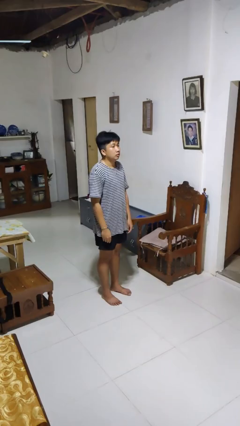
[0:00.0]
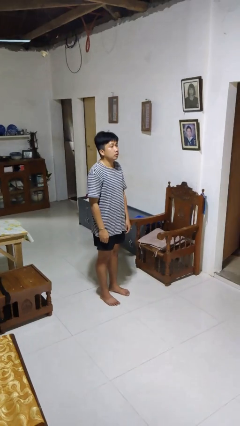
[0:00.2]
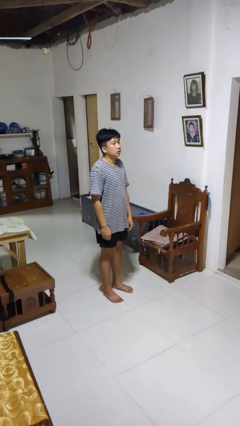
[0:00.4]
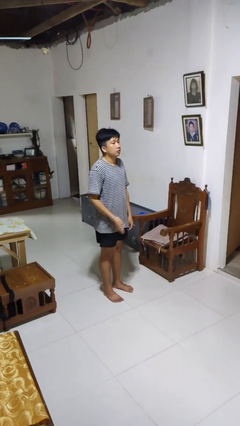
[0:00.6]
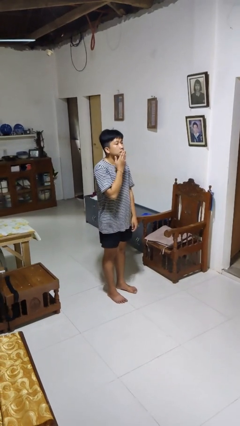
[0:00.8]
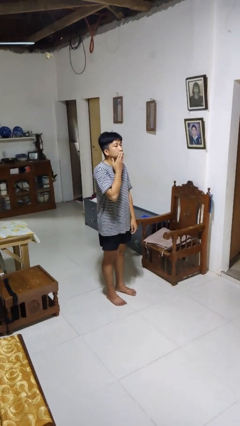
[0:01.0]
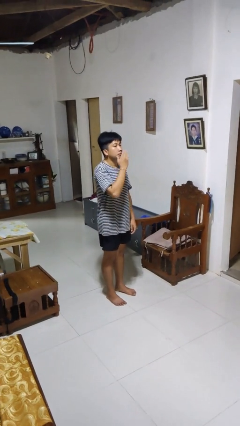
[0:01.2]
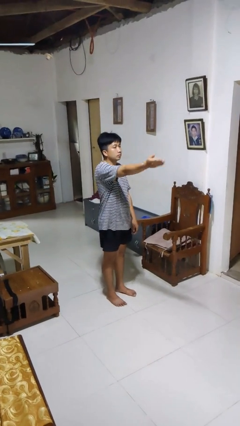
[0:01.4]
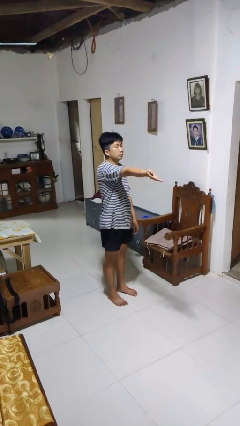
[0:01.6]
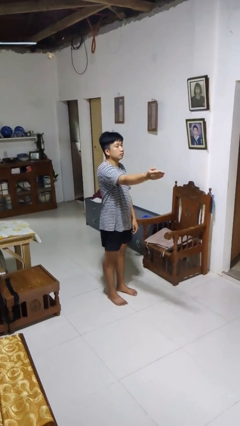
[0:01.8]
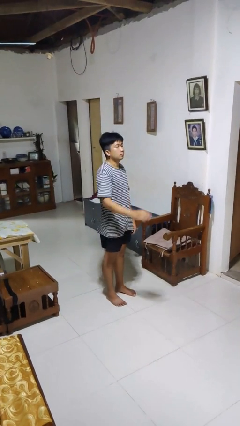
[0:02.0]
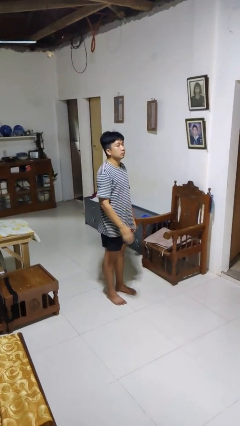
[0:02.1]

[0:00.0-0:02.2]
person gestures blow kiss

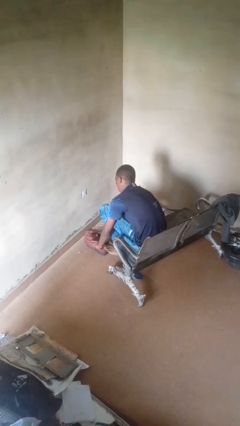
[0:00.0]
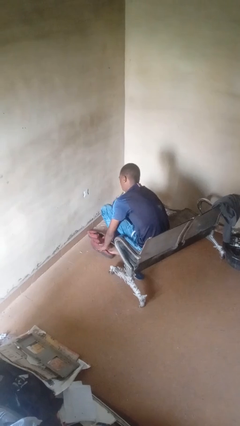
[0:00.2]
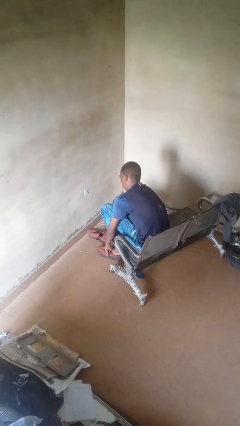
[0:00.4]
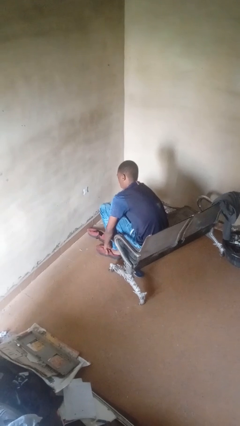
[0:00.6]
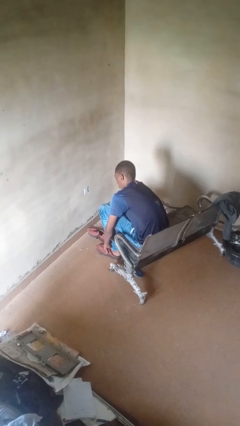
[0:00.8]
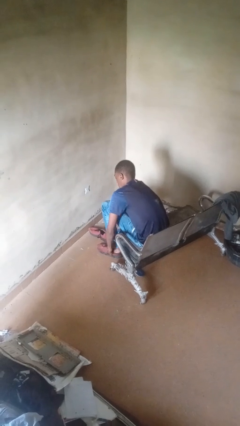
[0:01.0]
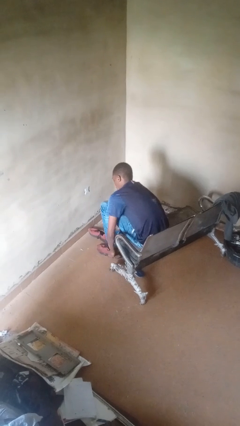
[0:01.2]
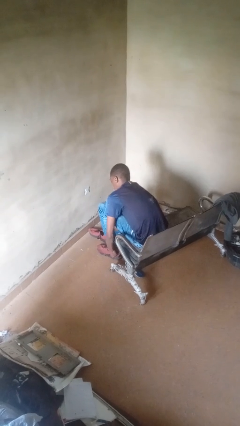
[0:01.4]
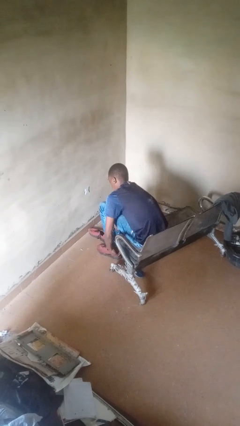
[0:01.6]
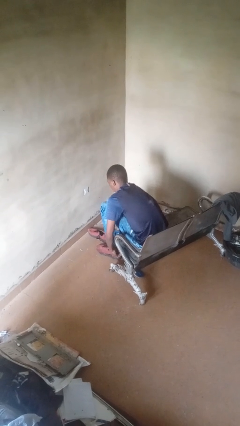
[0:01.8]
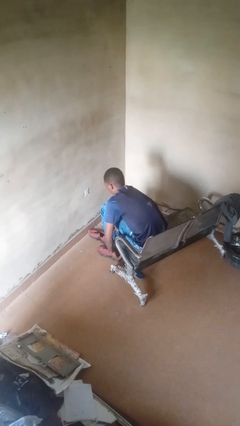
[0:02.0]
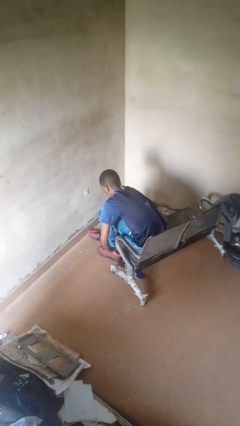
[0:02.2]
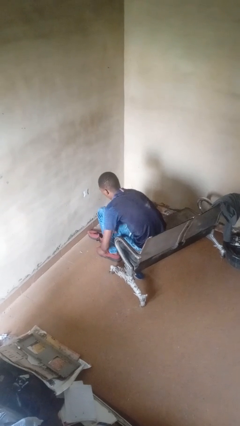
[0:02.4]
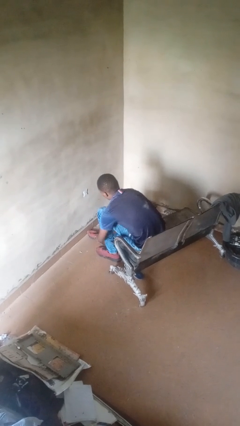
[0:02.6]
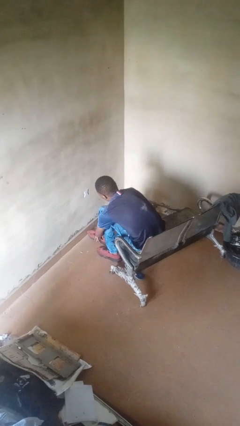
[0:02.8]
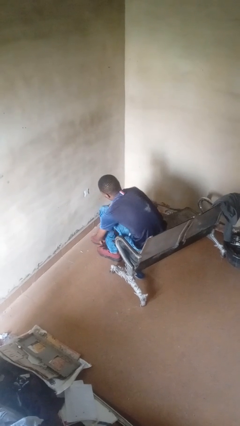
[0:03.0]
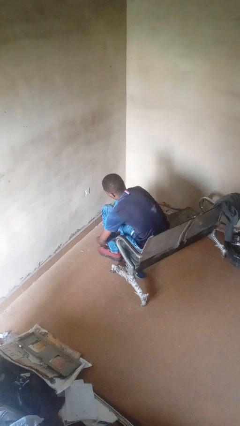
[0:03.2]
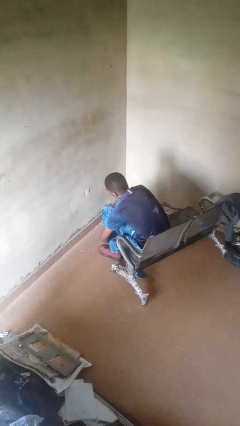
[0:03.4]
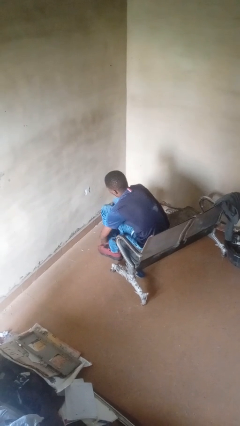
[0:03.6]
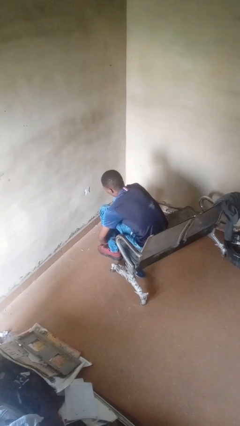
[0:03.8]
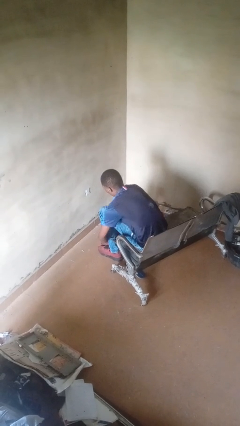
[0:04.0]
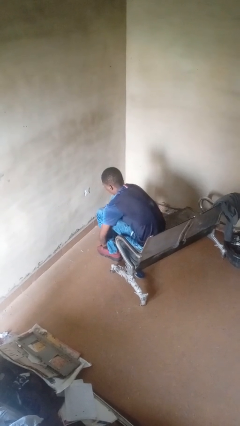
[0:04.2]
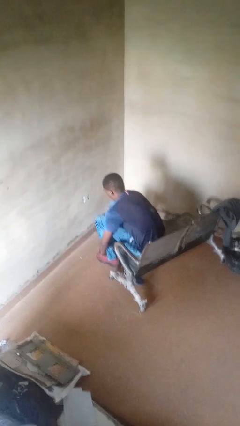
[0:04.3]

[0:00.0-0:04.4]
person puts on shoes

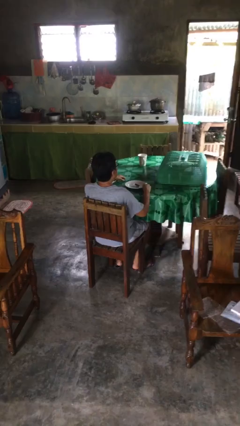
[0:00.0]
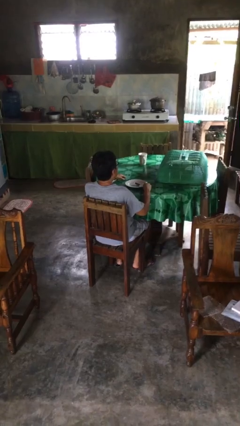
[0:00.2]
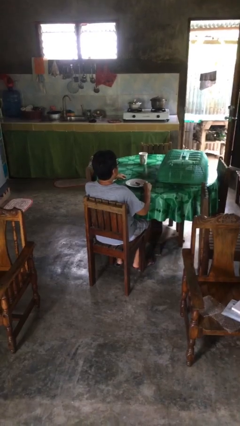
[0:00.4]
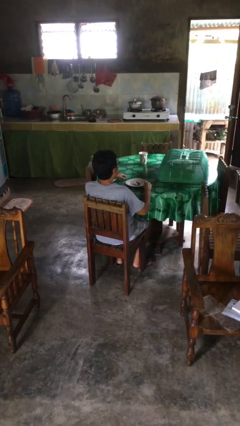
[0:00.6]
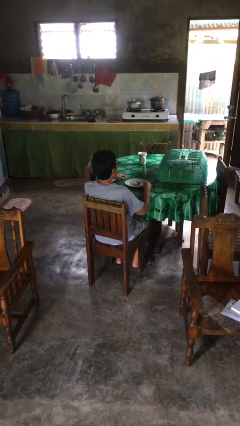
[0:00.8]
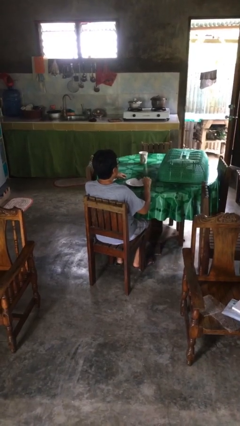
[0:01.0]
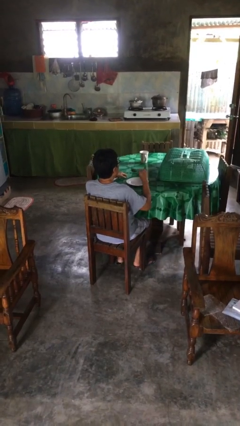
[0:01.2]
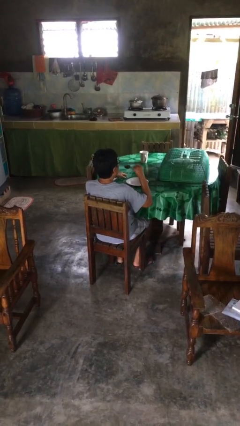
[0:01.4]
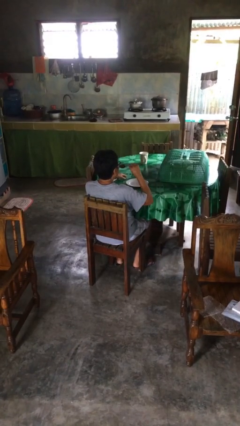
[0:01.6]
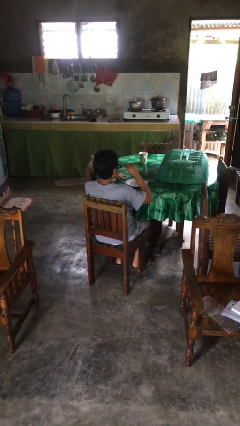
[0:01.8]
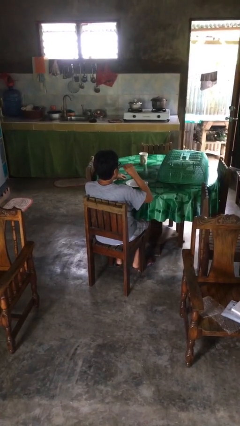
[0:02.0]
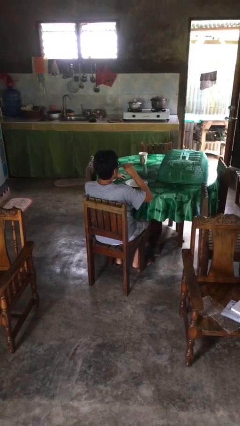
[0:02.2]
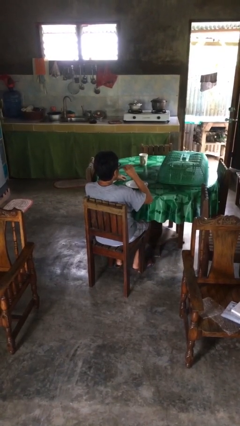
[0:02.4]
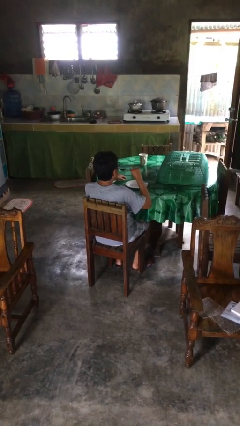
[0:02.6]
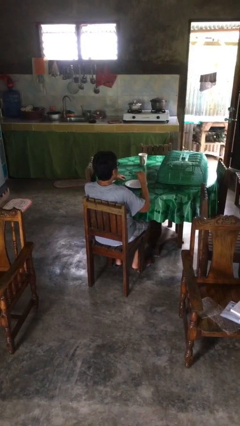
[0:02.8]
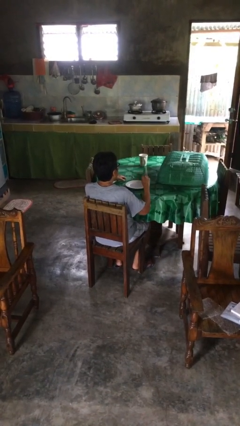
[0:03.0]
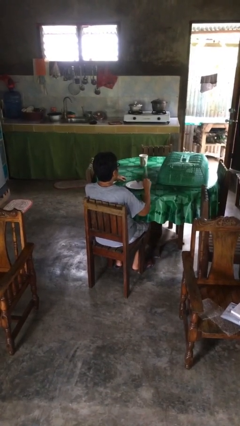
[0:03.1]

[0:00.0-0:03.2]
person eats with utensil

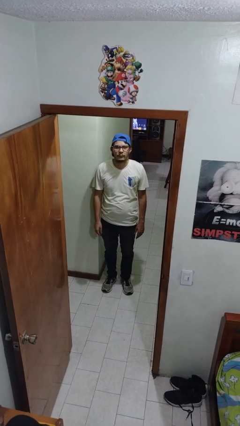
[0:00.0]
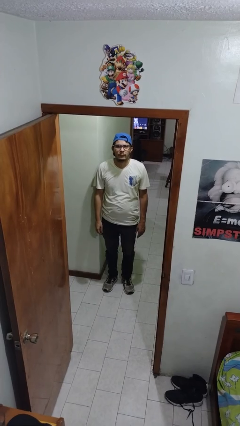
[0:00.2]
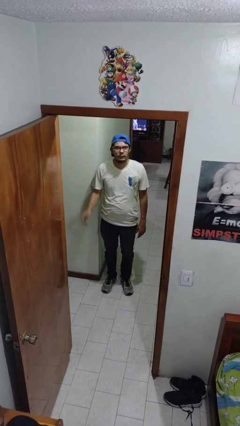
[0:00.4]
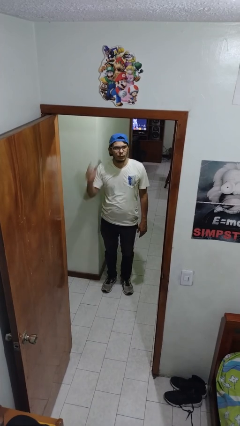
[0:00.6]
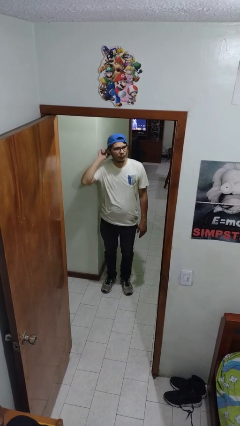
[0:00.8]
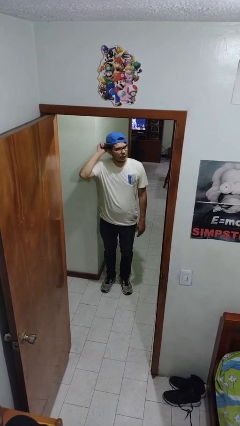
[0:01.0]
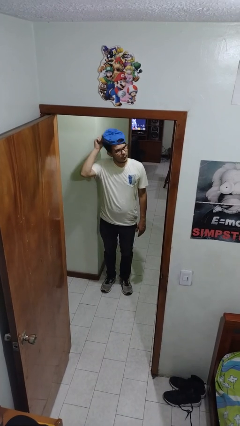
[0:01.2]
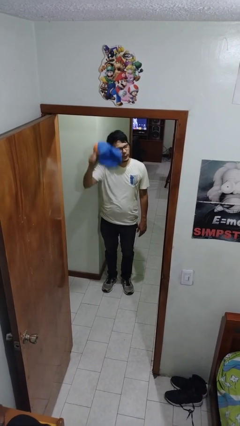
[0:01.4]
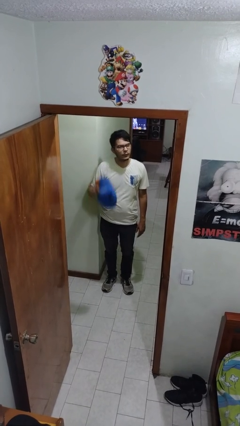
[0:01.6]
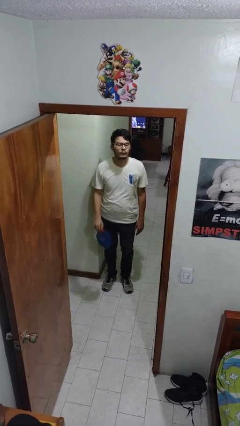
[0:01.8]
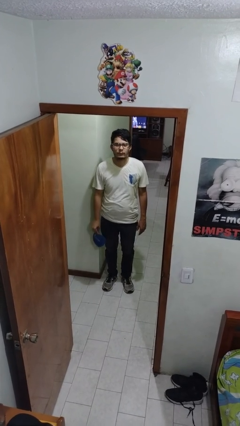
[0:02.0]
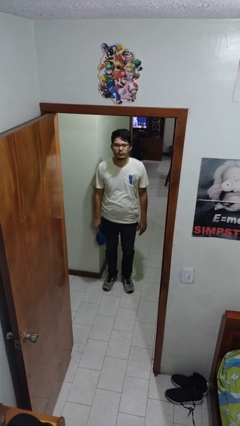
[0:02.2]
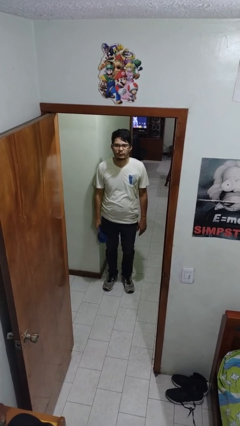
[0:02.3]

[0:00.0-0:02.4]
person takes off hat

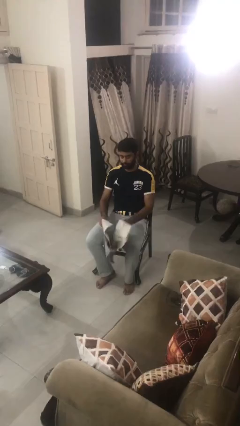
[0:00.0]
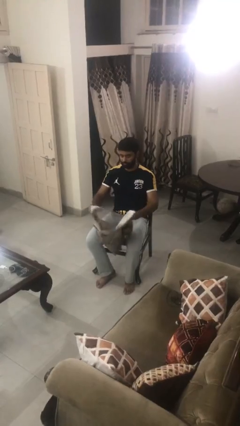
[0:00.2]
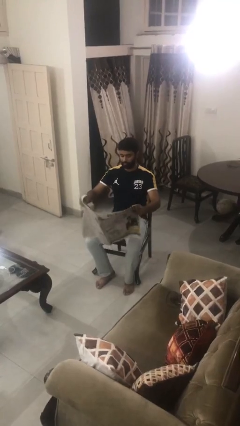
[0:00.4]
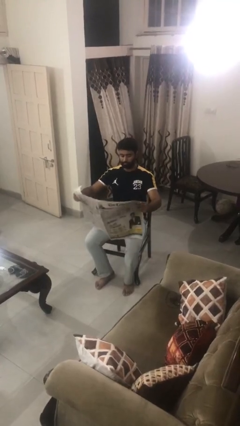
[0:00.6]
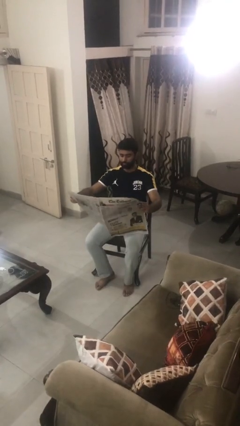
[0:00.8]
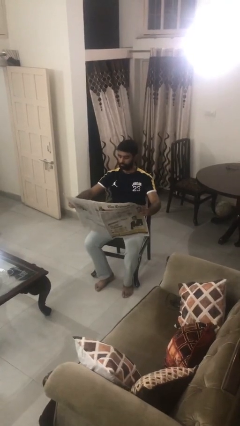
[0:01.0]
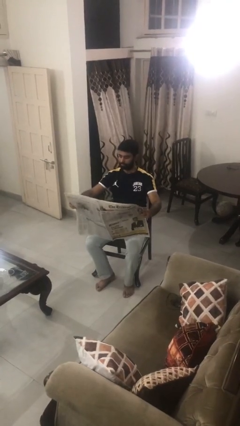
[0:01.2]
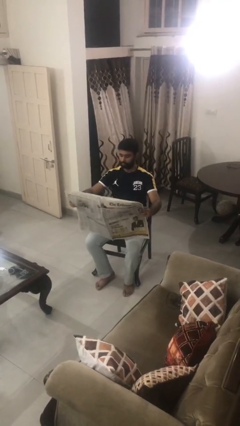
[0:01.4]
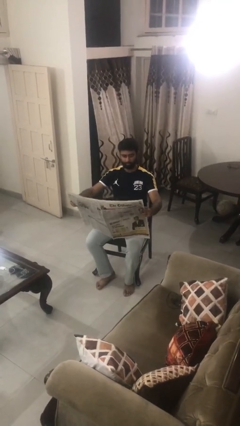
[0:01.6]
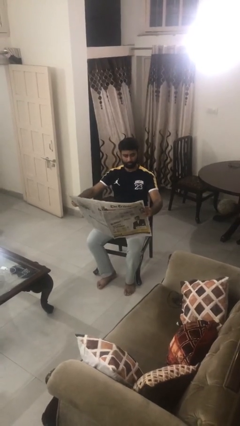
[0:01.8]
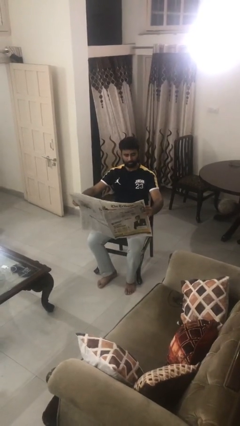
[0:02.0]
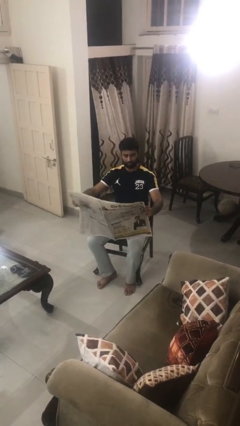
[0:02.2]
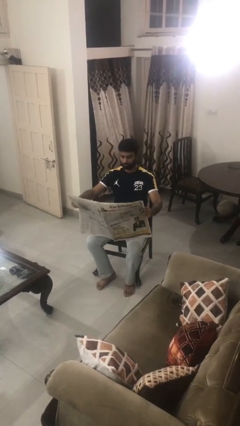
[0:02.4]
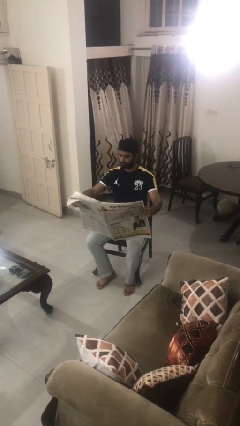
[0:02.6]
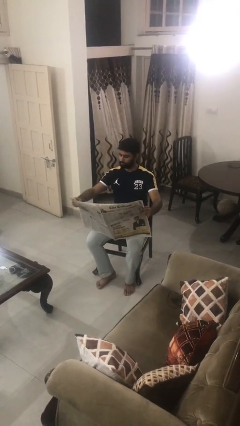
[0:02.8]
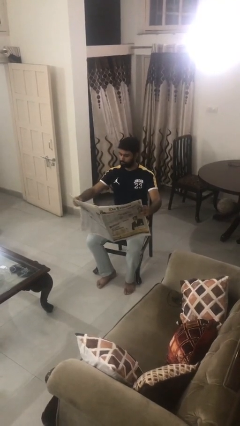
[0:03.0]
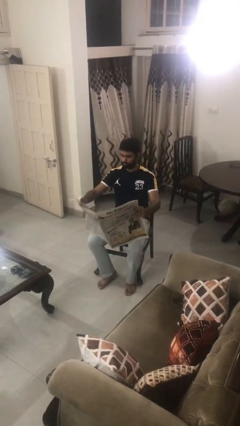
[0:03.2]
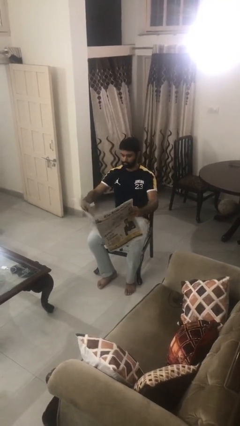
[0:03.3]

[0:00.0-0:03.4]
person reads newspaper

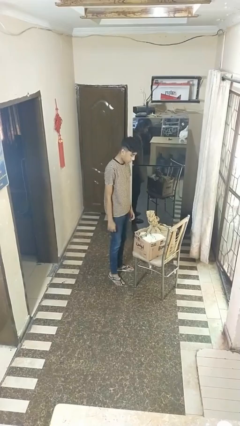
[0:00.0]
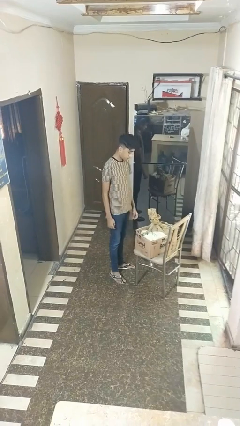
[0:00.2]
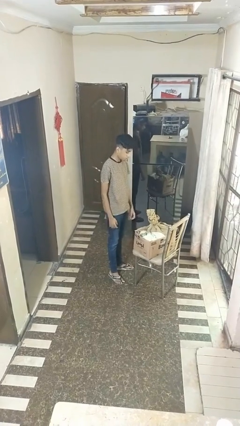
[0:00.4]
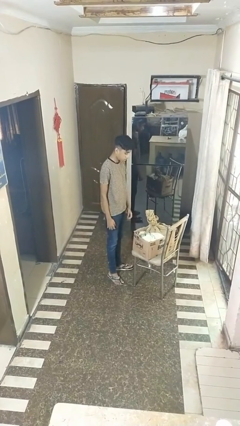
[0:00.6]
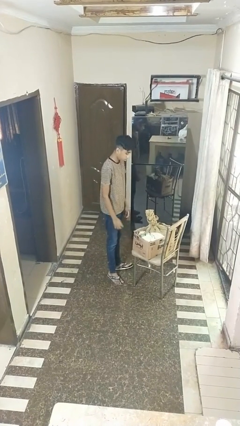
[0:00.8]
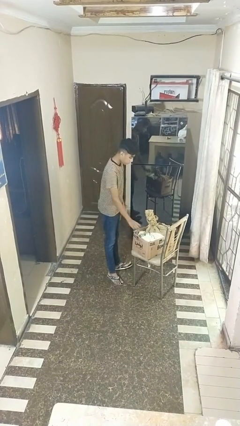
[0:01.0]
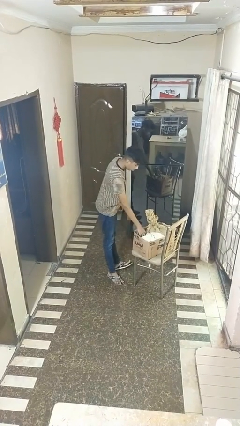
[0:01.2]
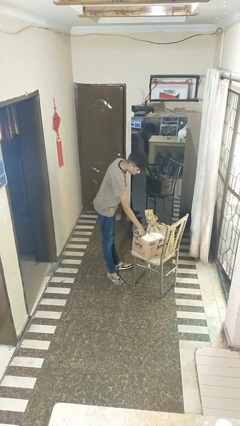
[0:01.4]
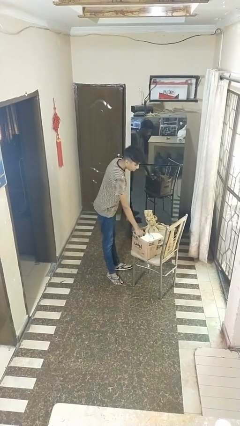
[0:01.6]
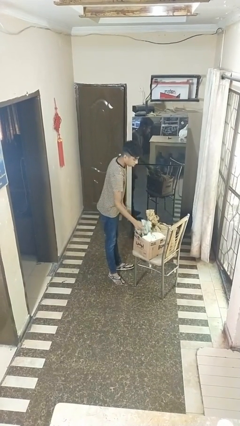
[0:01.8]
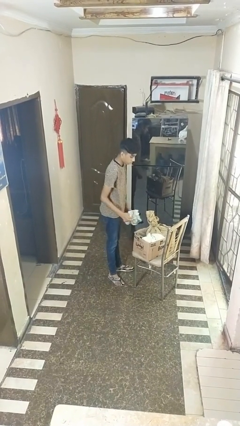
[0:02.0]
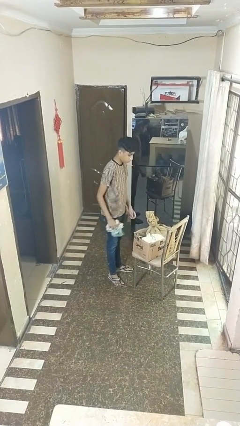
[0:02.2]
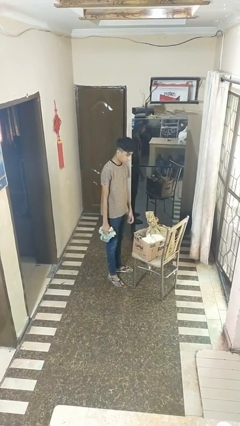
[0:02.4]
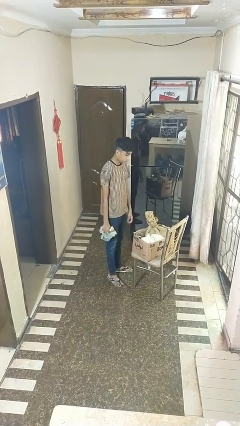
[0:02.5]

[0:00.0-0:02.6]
person takes object from box
